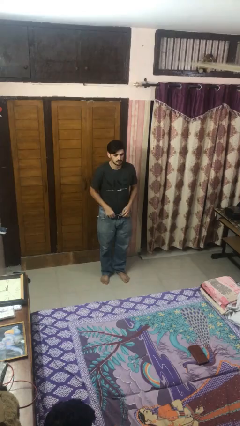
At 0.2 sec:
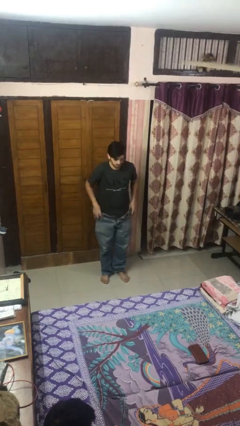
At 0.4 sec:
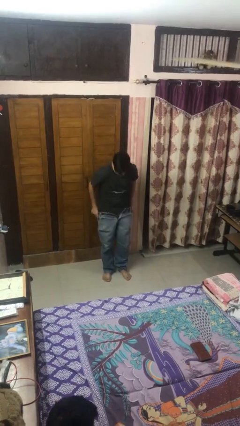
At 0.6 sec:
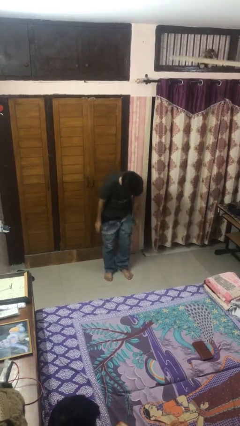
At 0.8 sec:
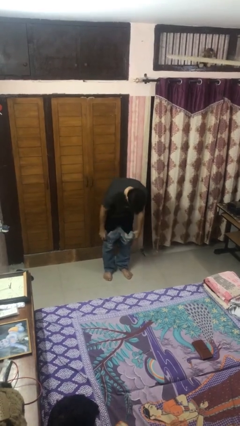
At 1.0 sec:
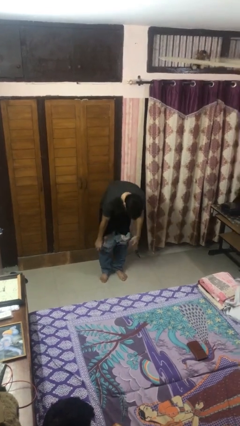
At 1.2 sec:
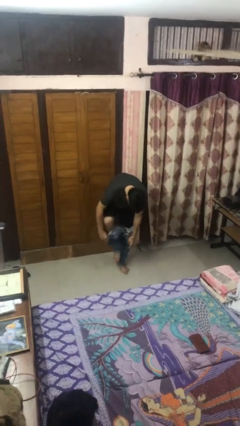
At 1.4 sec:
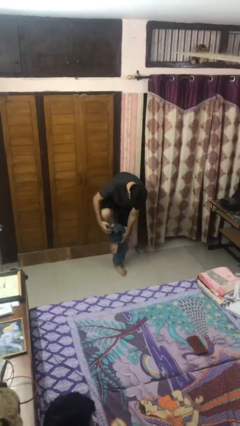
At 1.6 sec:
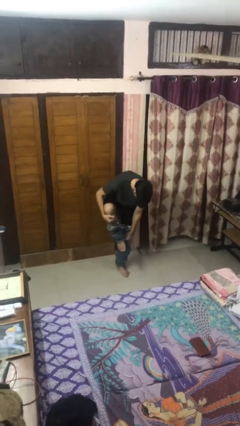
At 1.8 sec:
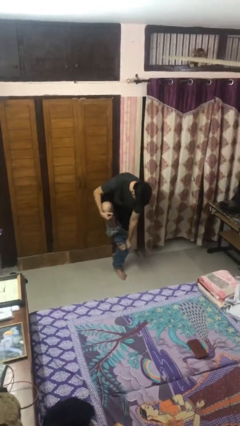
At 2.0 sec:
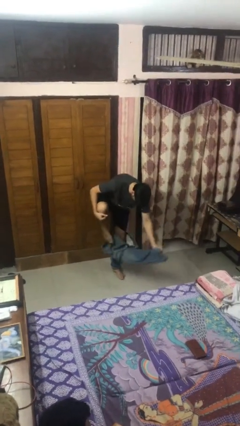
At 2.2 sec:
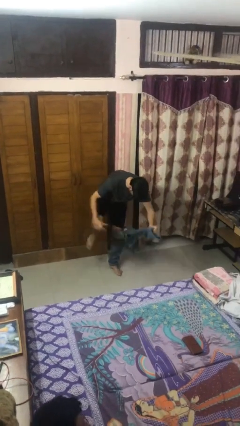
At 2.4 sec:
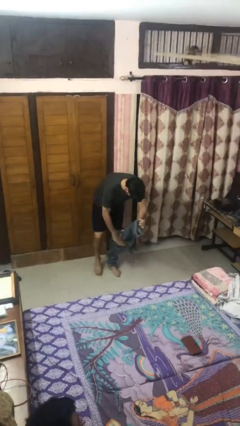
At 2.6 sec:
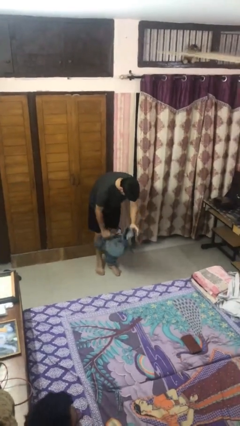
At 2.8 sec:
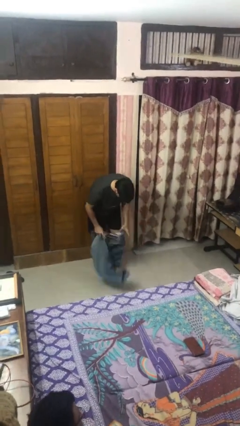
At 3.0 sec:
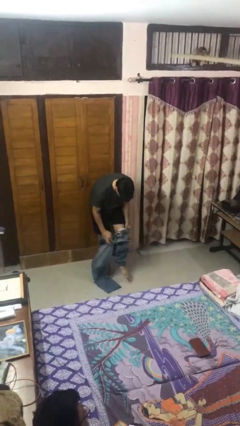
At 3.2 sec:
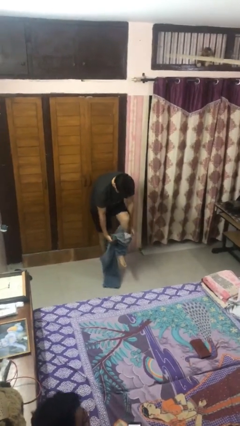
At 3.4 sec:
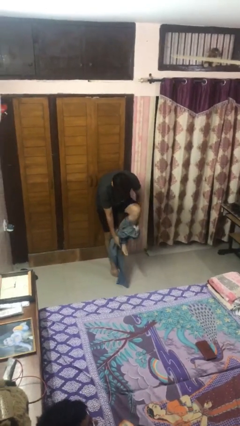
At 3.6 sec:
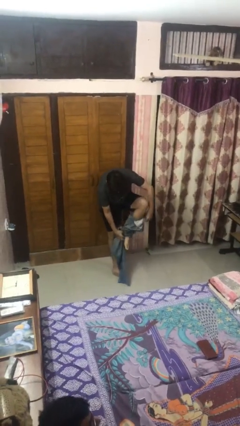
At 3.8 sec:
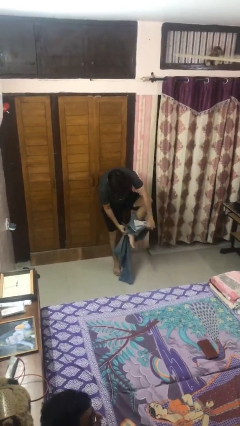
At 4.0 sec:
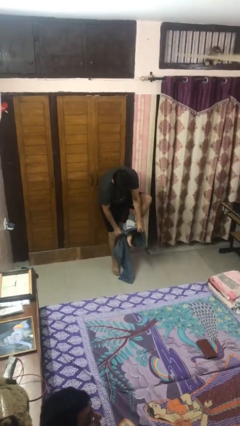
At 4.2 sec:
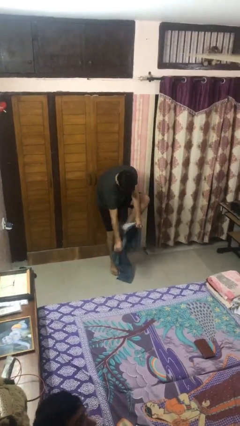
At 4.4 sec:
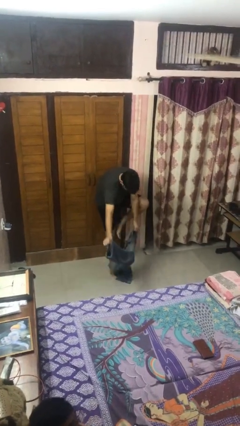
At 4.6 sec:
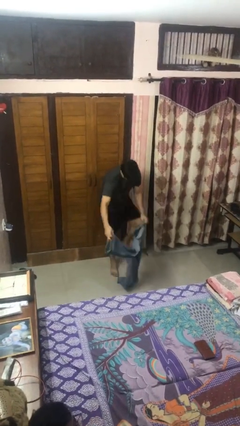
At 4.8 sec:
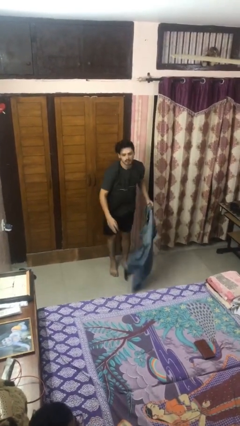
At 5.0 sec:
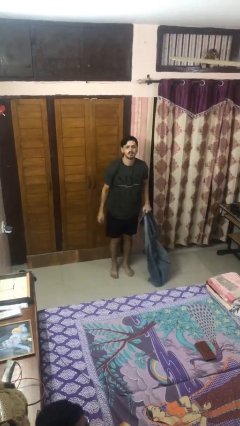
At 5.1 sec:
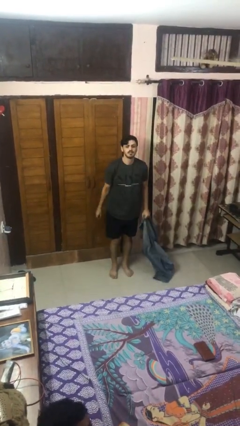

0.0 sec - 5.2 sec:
person takes off pants

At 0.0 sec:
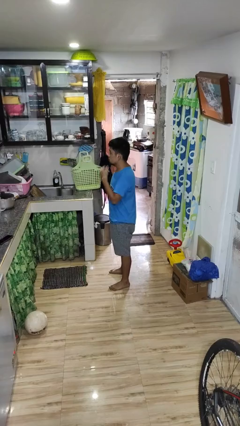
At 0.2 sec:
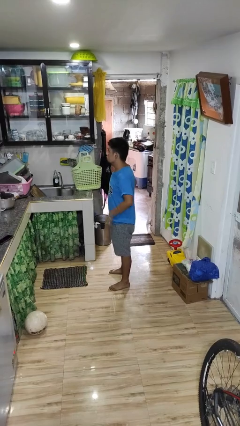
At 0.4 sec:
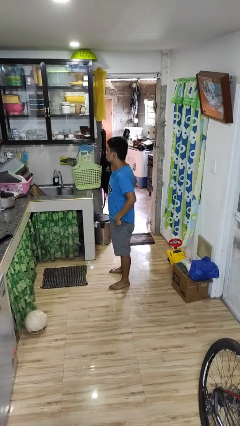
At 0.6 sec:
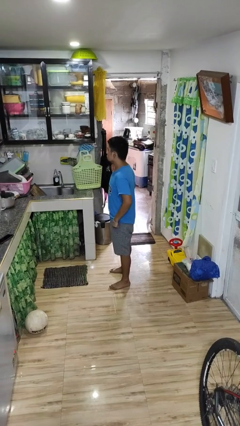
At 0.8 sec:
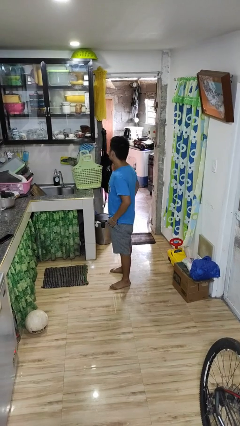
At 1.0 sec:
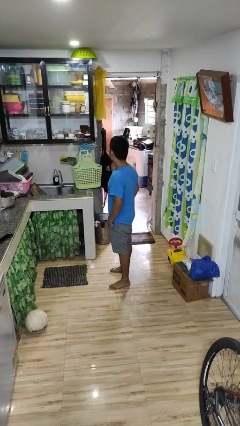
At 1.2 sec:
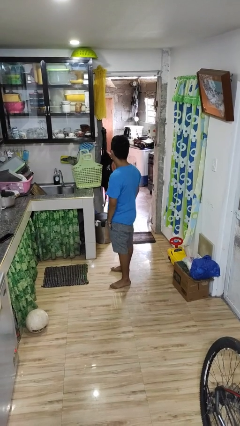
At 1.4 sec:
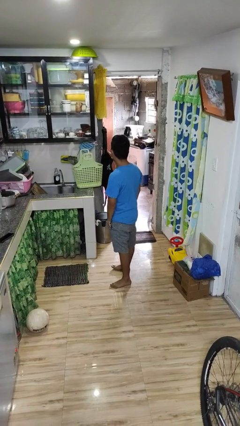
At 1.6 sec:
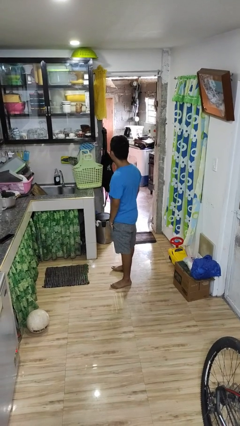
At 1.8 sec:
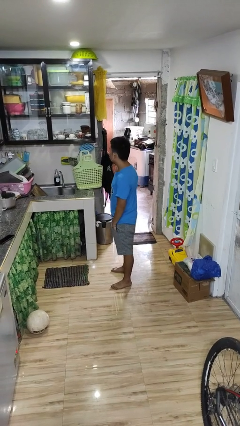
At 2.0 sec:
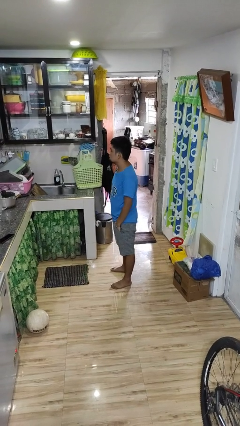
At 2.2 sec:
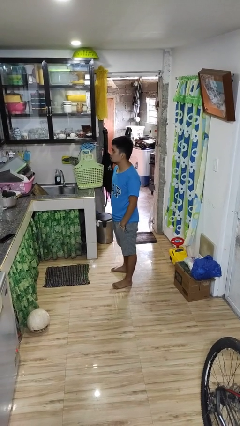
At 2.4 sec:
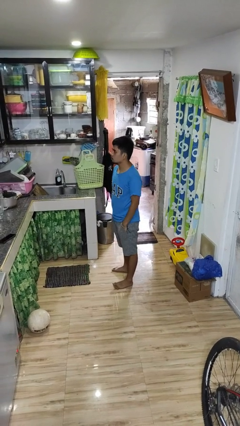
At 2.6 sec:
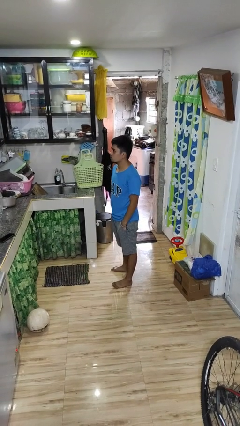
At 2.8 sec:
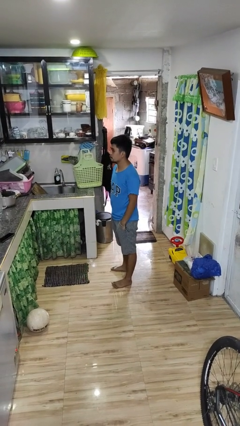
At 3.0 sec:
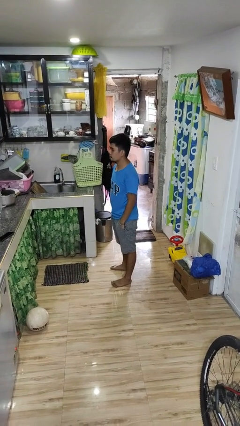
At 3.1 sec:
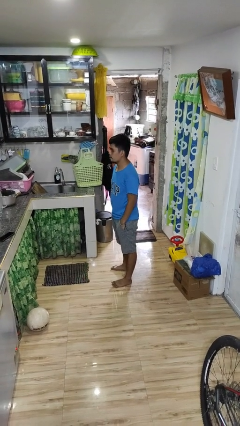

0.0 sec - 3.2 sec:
person puts hands in back pockets

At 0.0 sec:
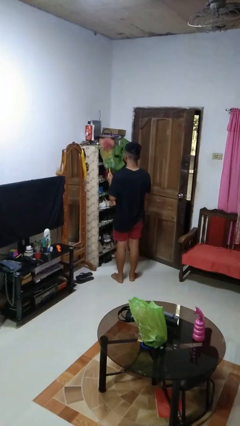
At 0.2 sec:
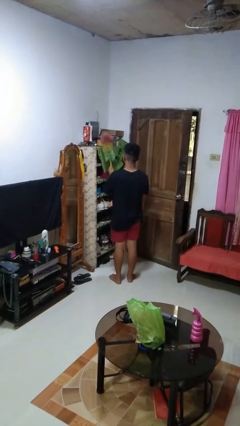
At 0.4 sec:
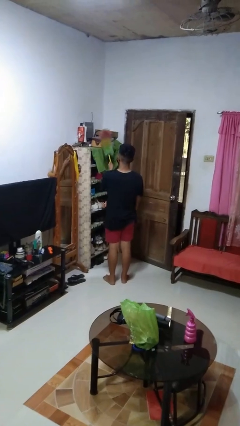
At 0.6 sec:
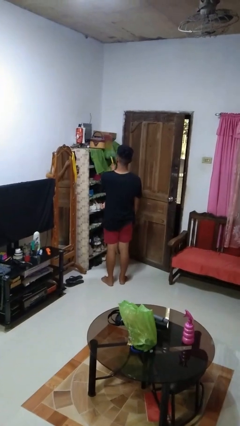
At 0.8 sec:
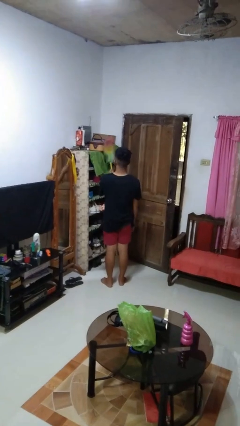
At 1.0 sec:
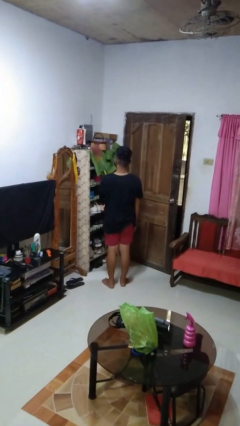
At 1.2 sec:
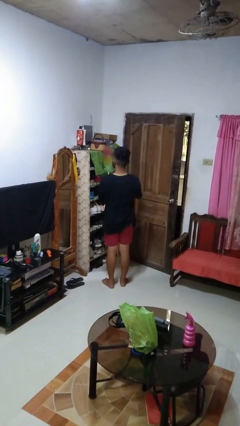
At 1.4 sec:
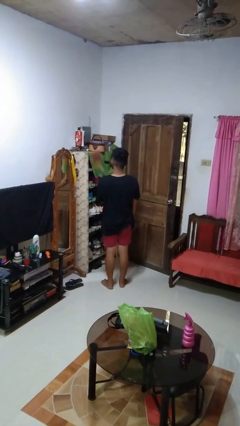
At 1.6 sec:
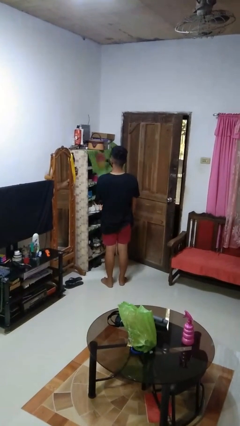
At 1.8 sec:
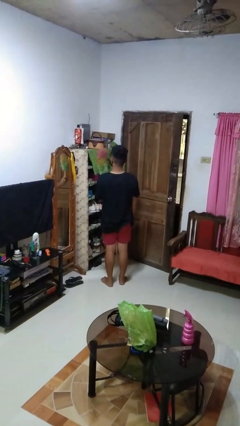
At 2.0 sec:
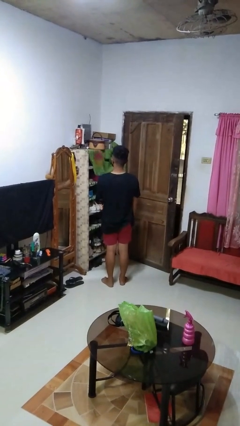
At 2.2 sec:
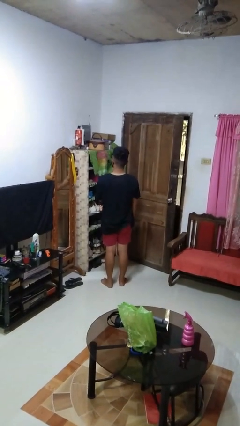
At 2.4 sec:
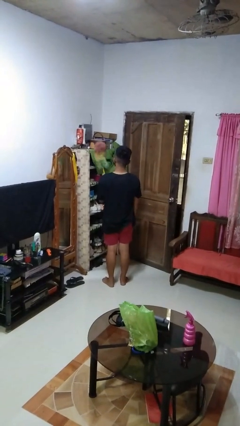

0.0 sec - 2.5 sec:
person dusts furniture

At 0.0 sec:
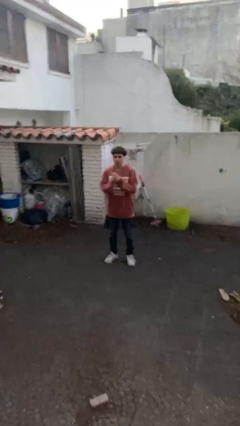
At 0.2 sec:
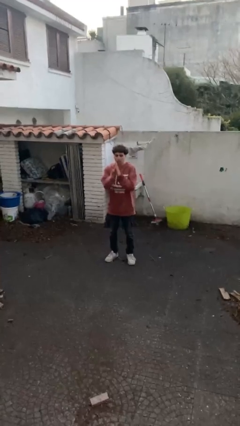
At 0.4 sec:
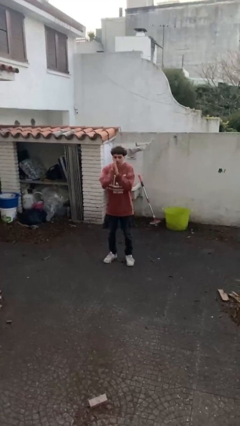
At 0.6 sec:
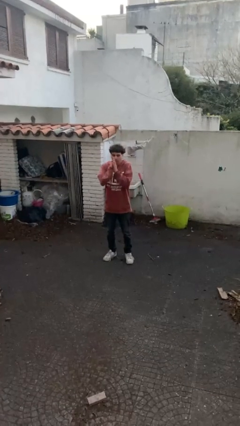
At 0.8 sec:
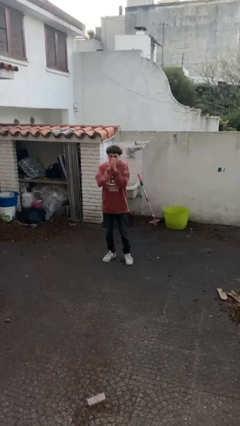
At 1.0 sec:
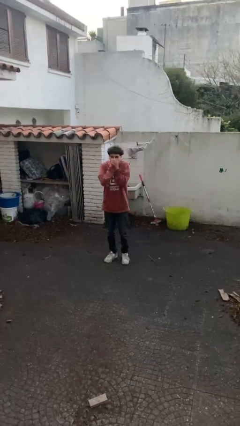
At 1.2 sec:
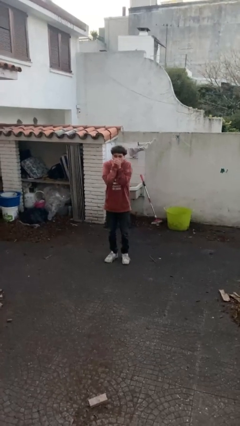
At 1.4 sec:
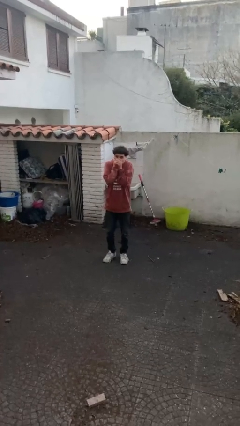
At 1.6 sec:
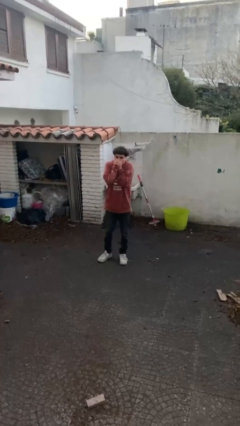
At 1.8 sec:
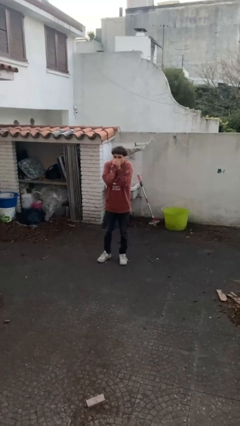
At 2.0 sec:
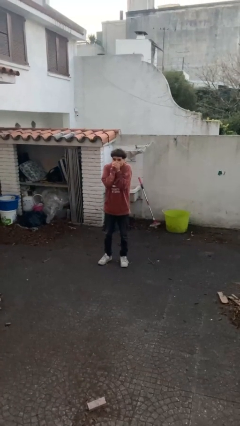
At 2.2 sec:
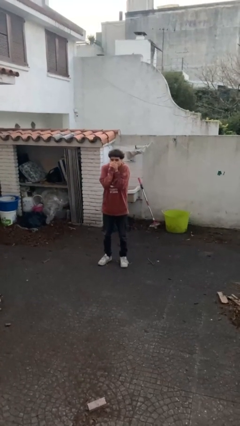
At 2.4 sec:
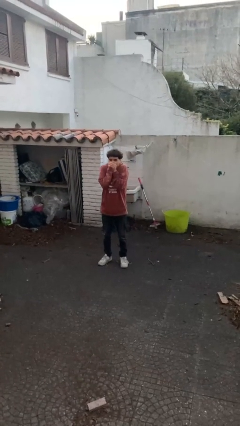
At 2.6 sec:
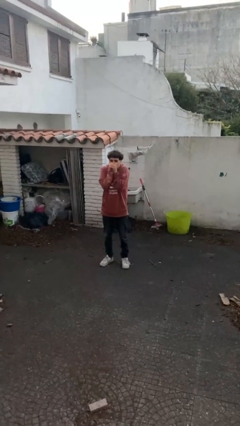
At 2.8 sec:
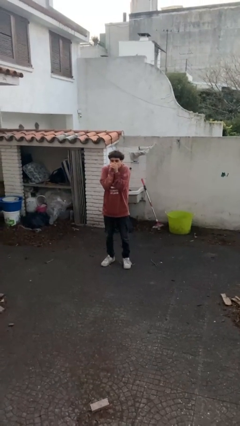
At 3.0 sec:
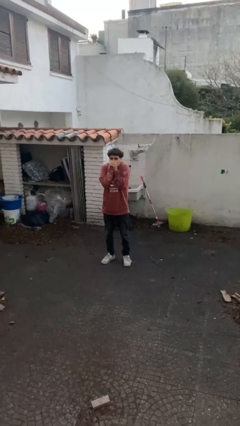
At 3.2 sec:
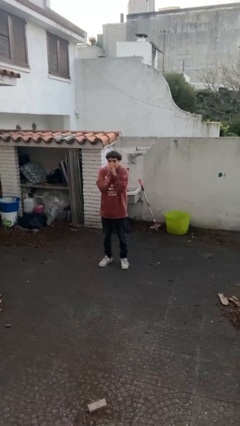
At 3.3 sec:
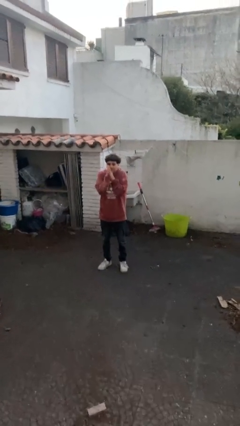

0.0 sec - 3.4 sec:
person blows into hands

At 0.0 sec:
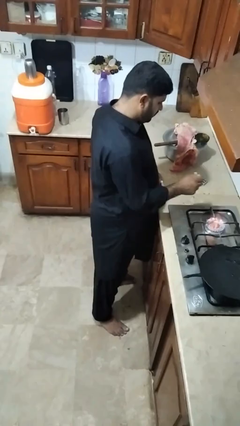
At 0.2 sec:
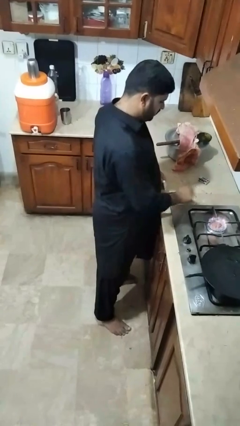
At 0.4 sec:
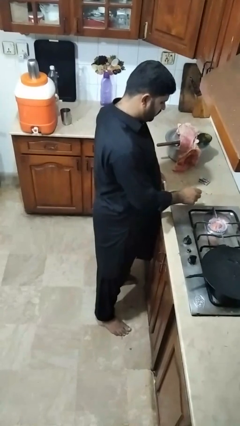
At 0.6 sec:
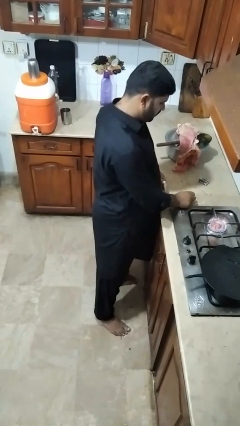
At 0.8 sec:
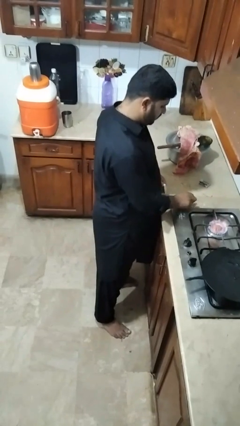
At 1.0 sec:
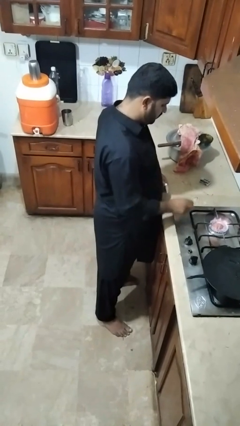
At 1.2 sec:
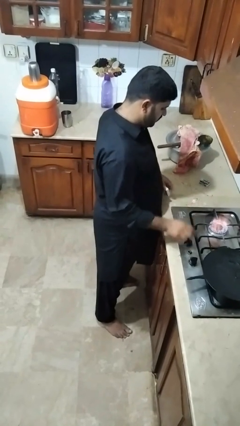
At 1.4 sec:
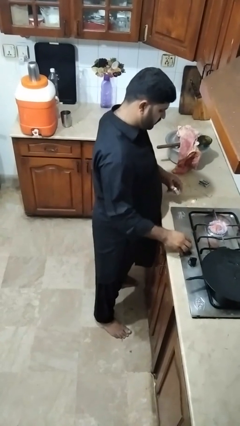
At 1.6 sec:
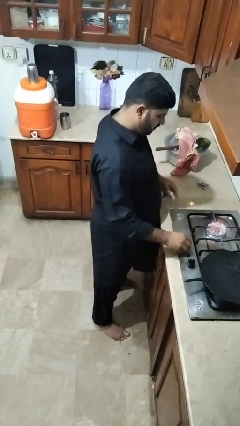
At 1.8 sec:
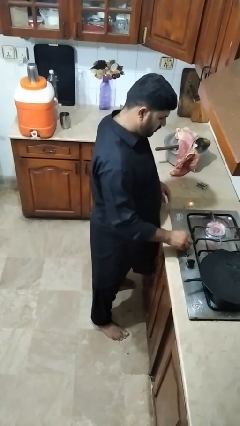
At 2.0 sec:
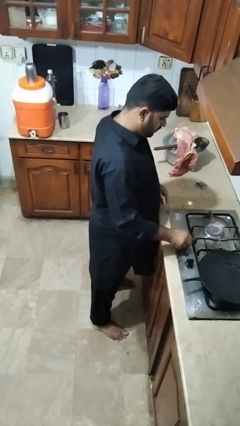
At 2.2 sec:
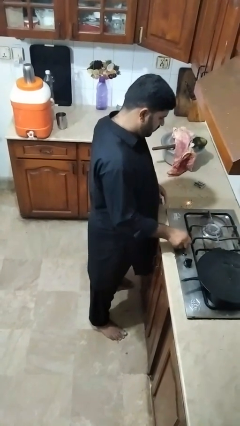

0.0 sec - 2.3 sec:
person turns off stovetop

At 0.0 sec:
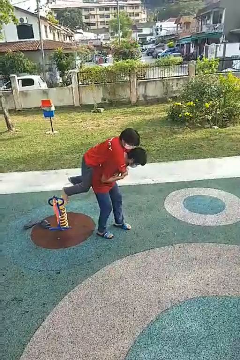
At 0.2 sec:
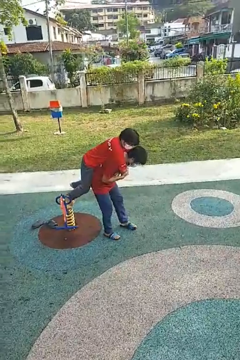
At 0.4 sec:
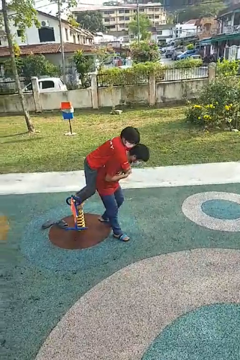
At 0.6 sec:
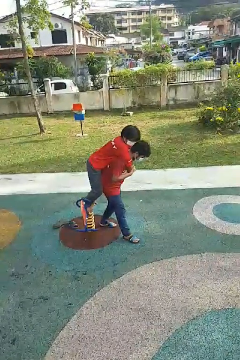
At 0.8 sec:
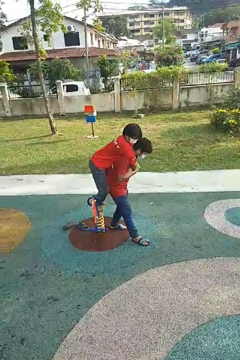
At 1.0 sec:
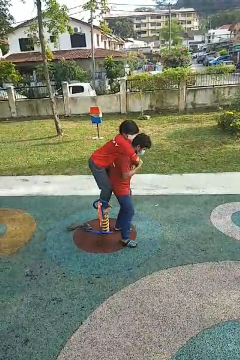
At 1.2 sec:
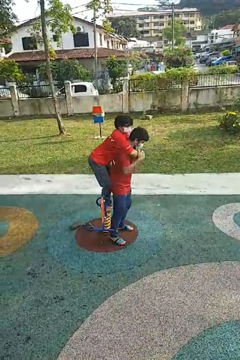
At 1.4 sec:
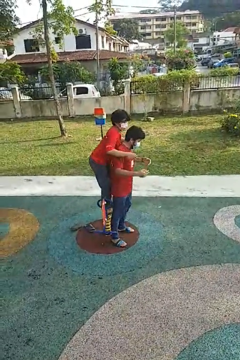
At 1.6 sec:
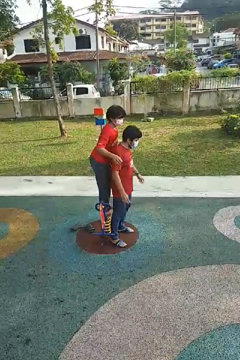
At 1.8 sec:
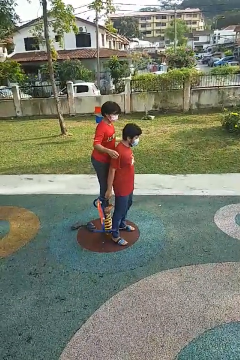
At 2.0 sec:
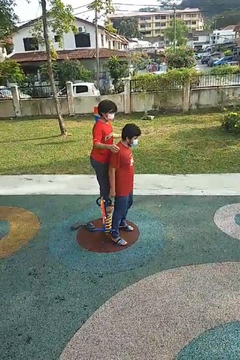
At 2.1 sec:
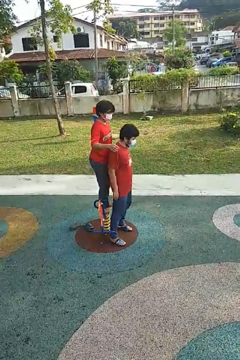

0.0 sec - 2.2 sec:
person puts down person
